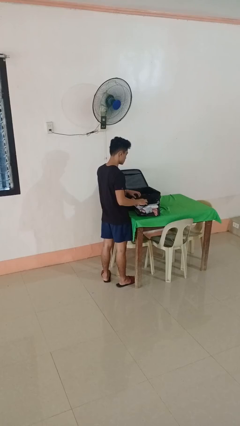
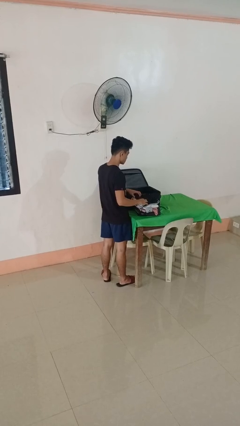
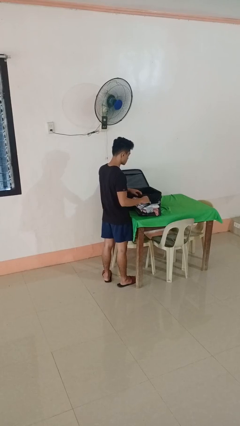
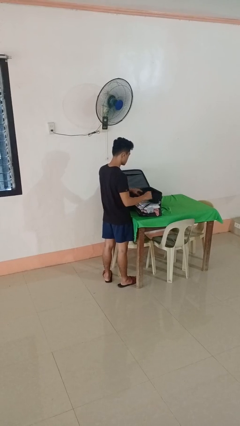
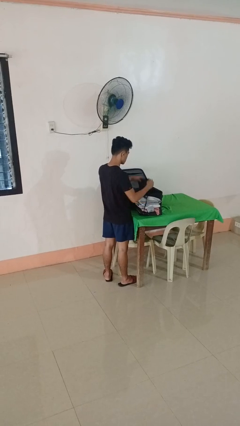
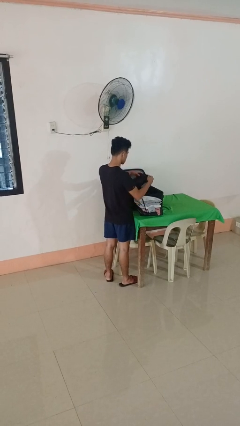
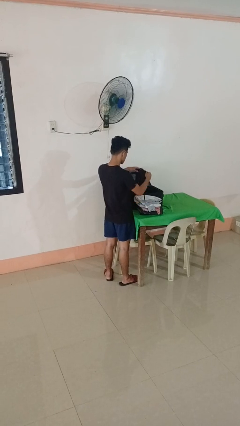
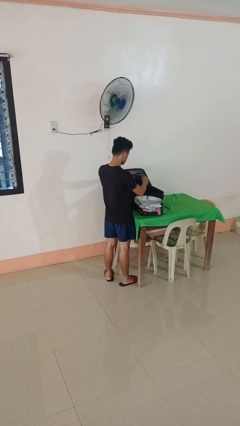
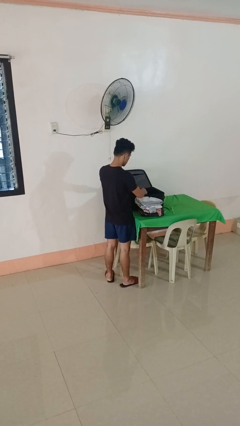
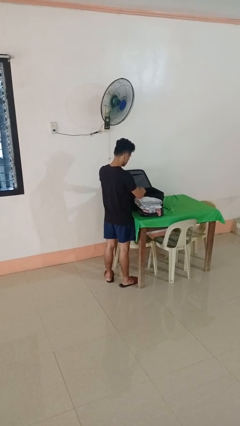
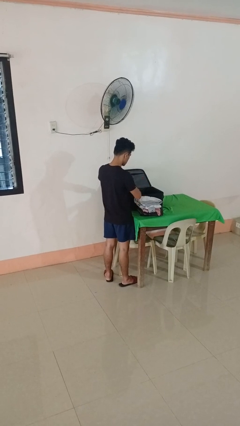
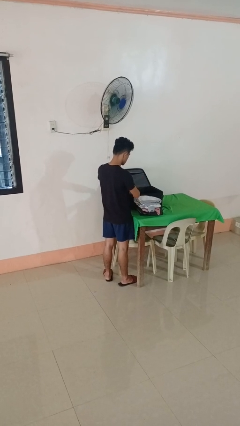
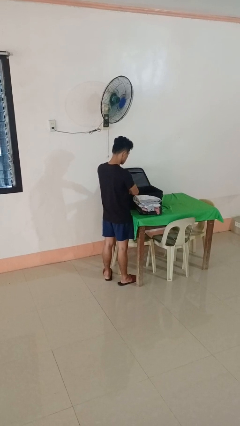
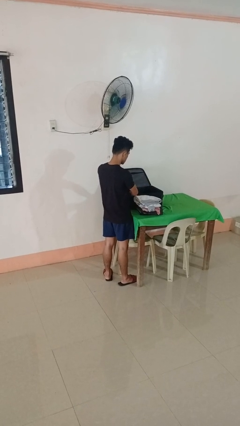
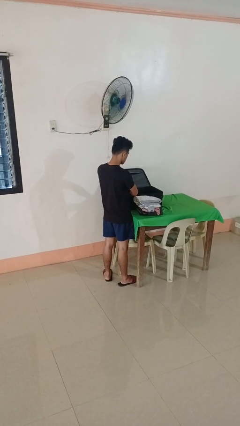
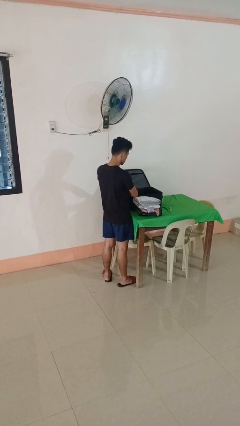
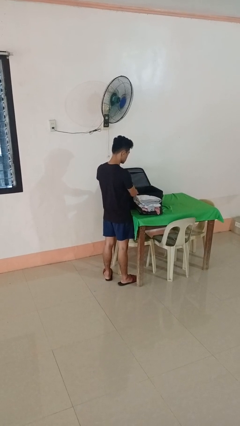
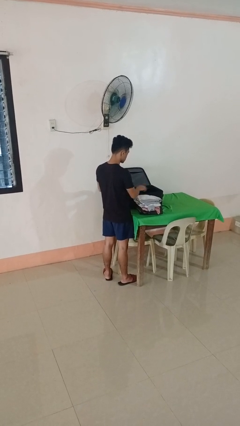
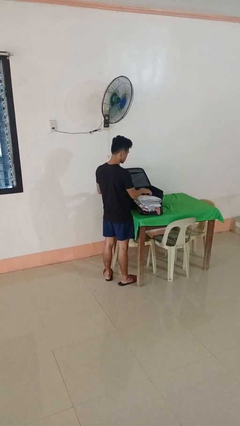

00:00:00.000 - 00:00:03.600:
person loads clothes into suitcase

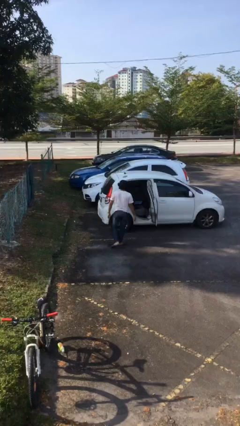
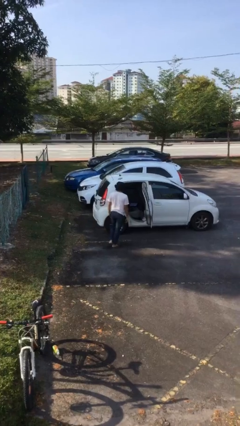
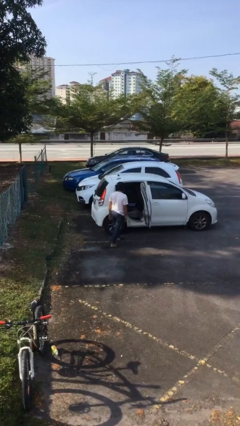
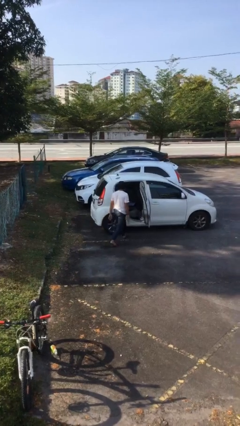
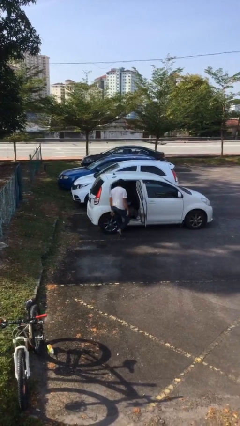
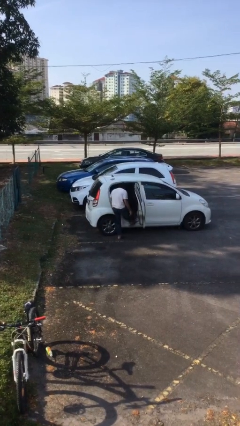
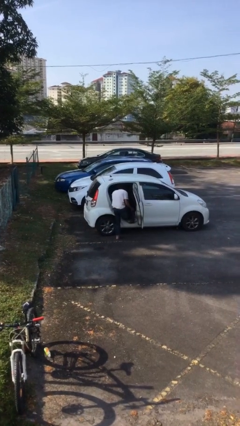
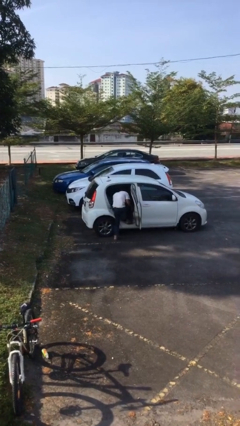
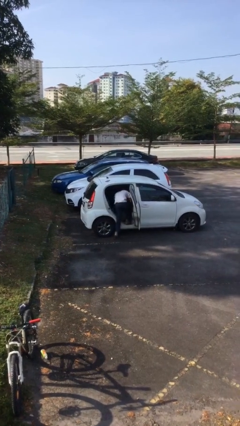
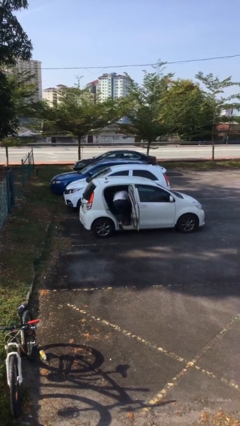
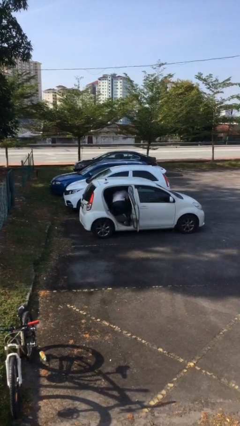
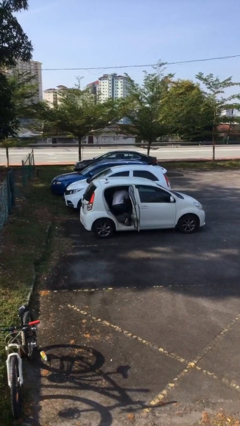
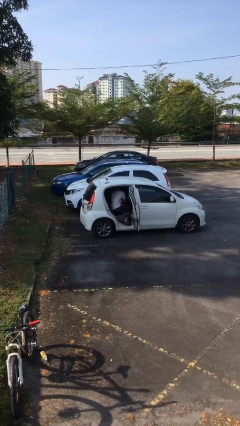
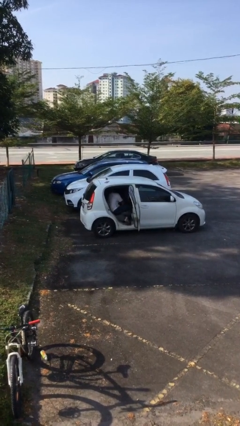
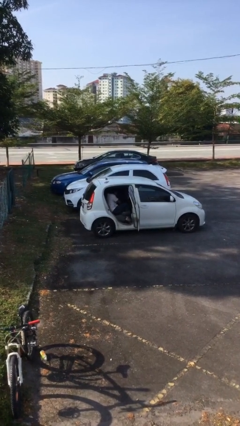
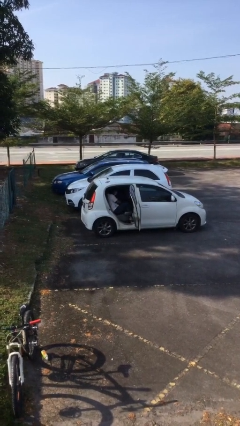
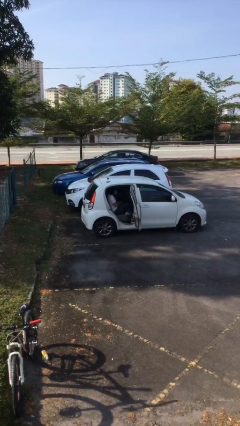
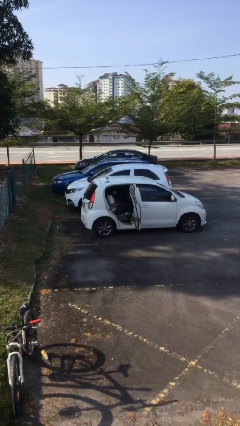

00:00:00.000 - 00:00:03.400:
person enters car

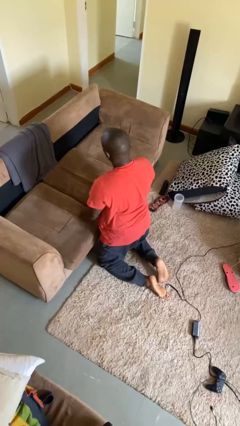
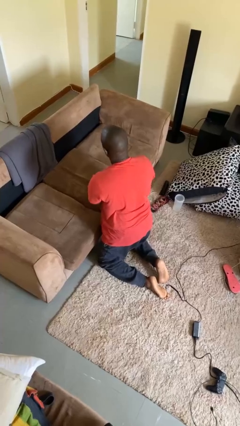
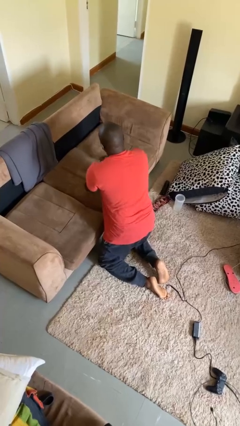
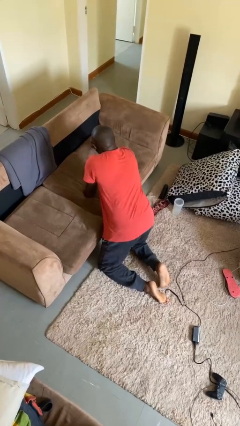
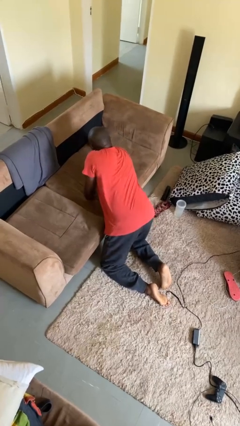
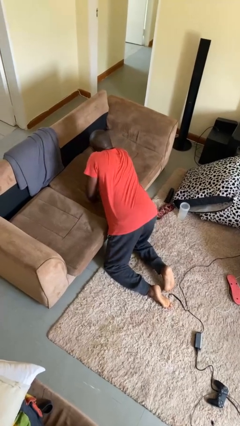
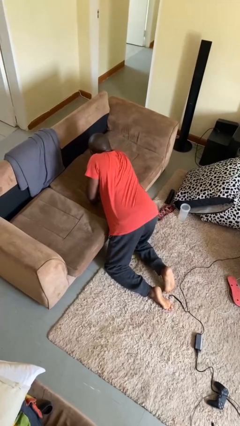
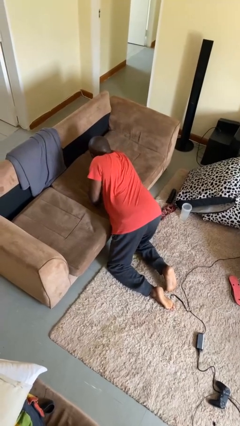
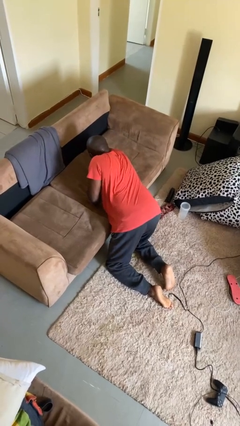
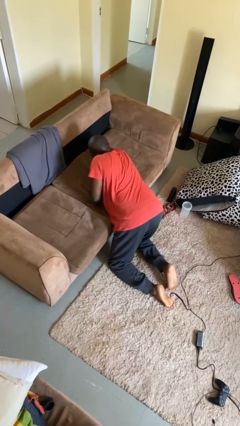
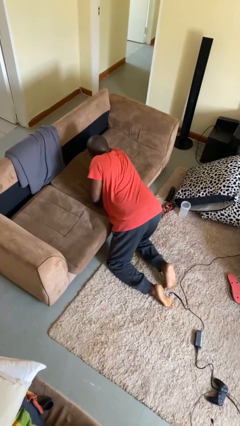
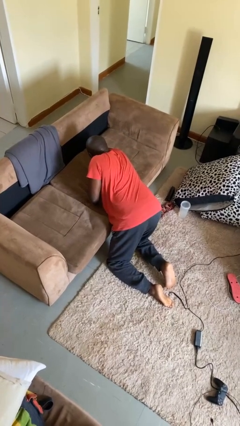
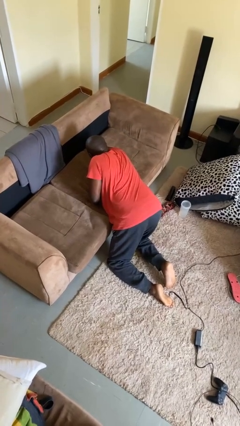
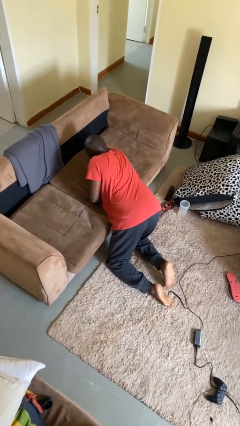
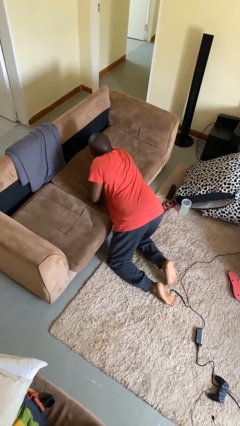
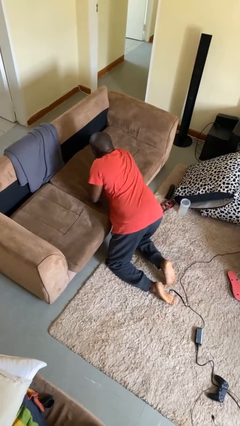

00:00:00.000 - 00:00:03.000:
person searches in couch

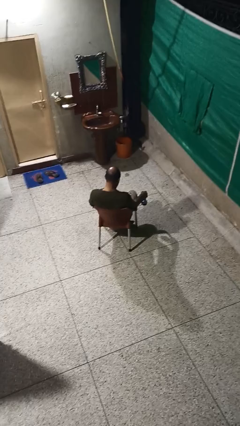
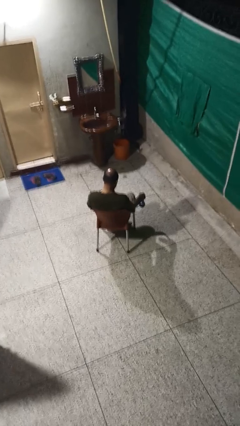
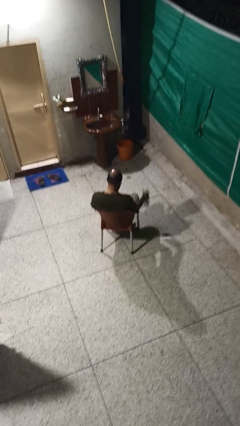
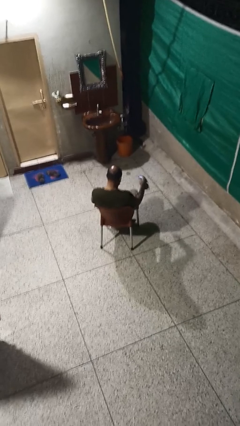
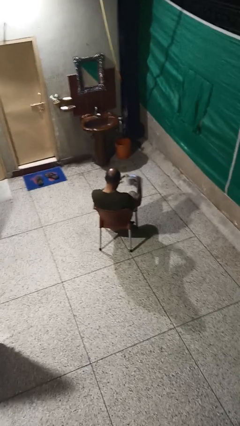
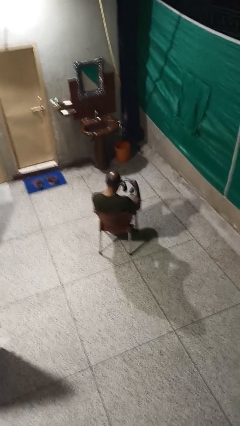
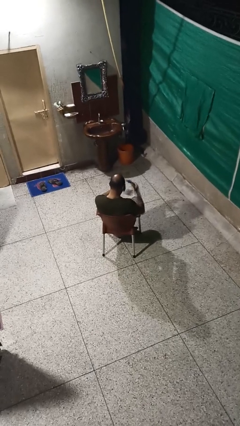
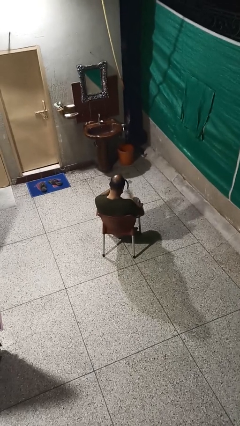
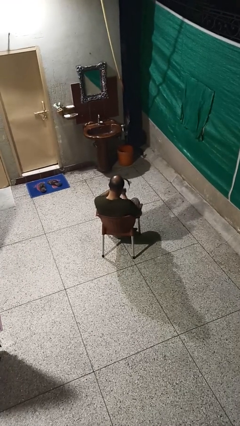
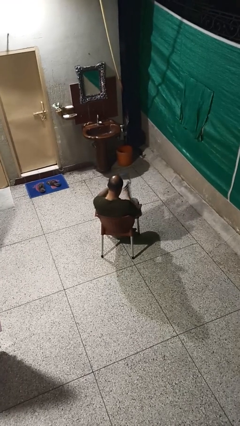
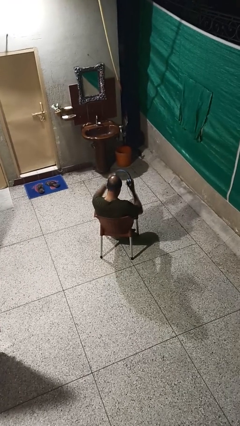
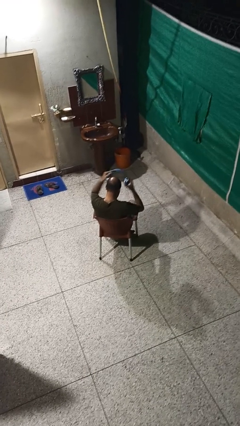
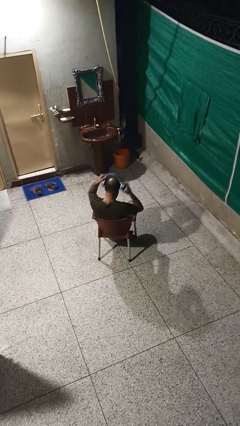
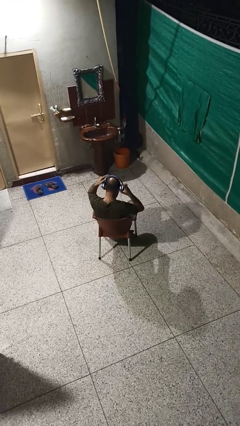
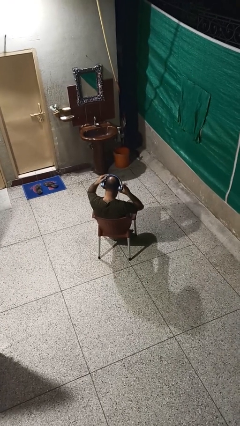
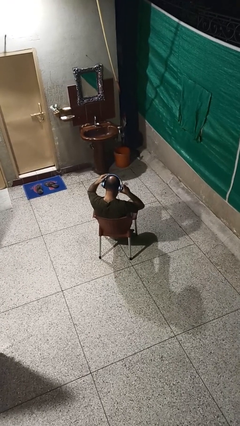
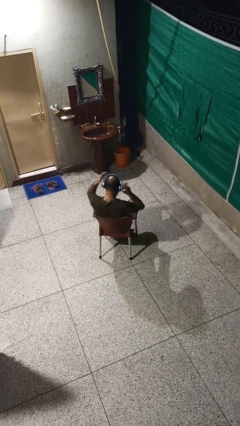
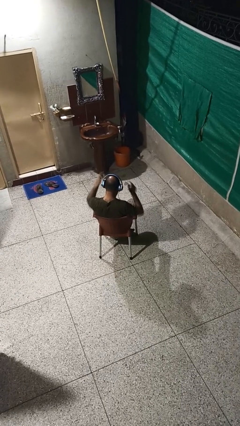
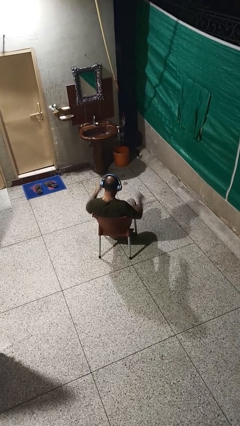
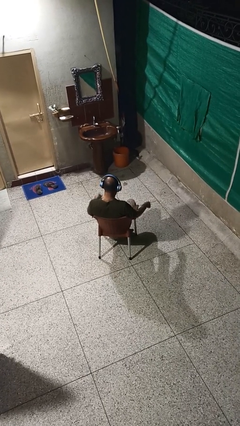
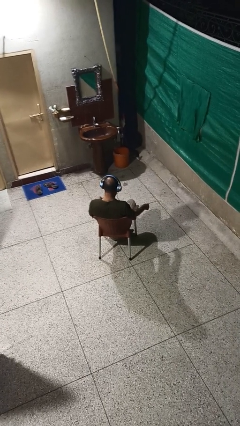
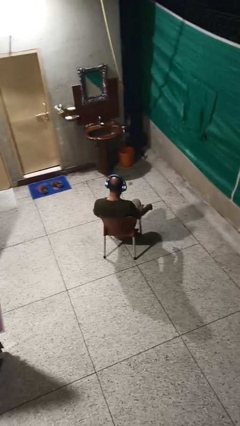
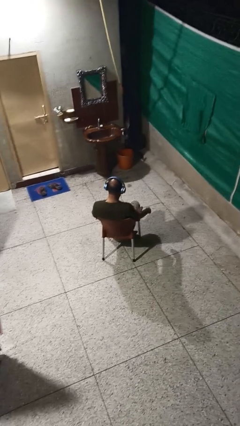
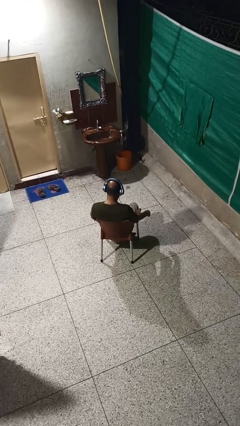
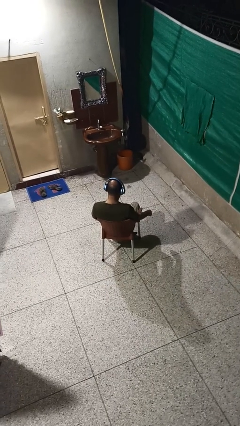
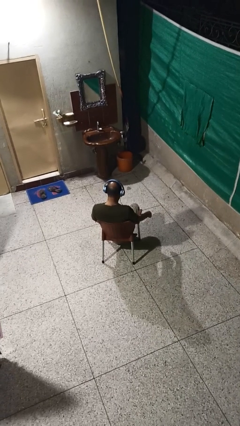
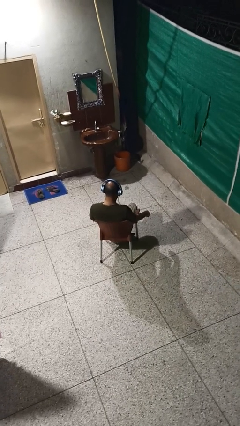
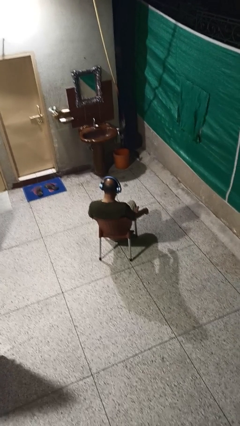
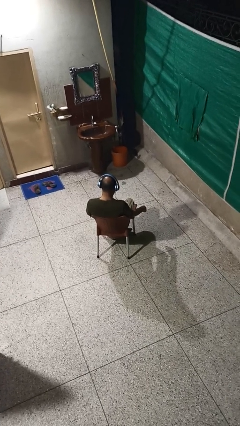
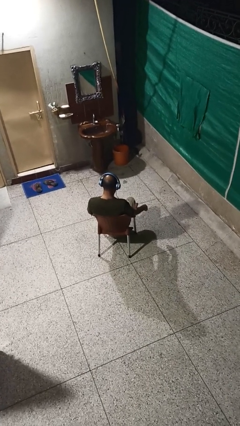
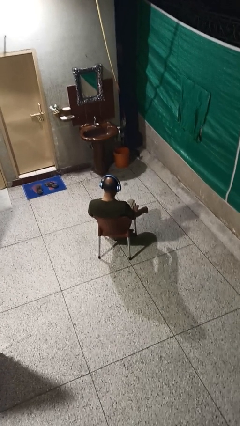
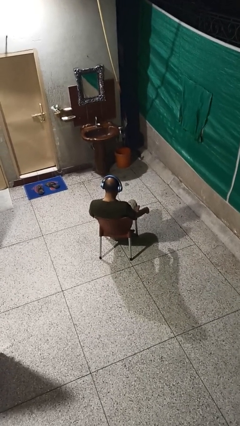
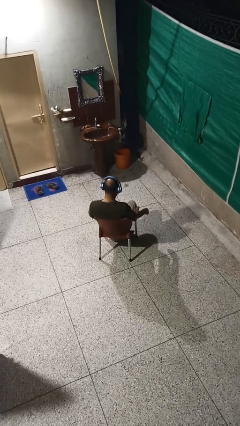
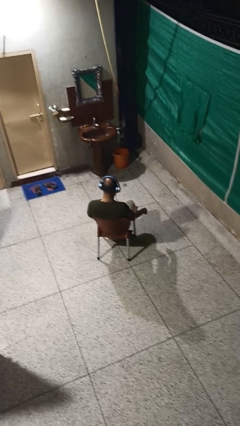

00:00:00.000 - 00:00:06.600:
person puts on headphones

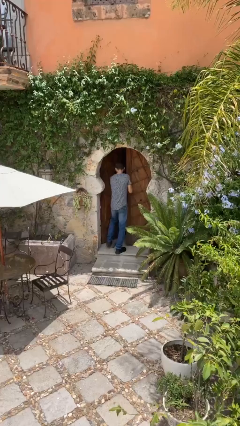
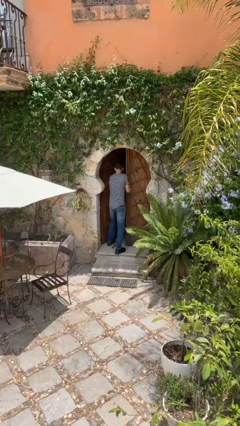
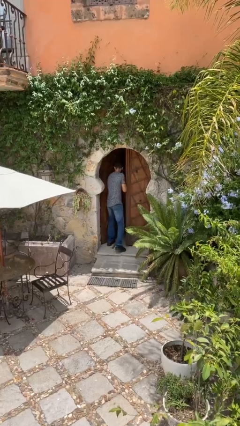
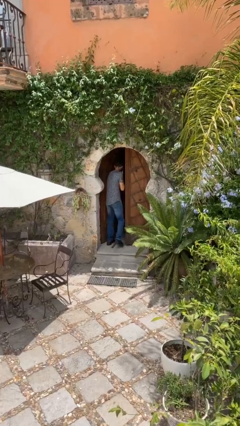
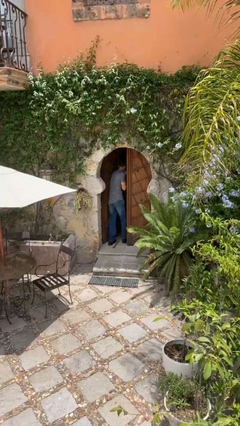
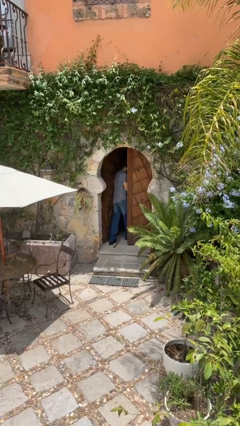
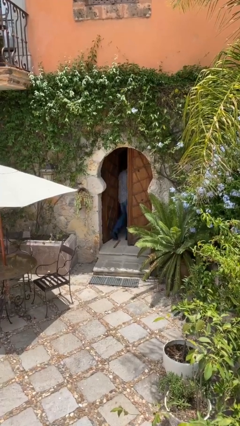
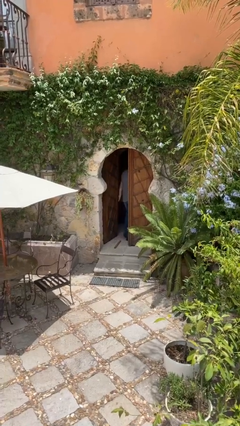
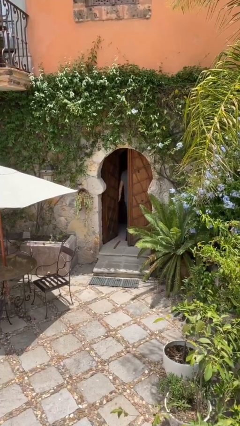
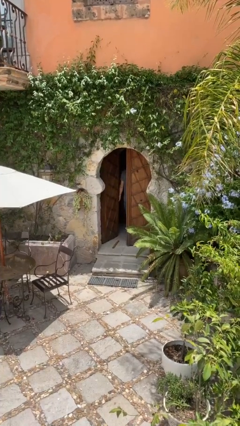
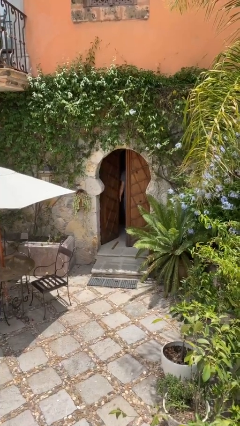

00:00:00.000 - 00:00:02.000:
person exits scene through structure
